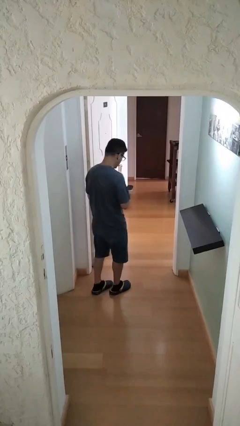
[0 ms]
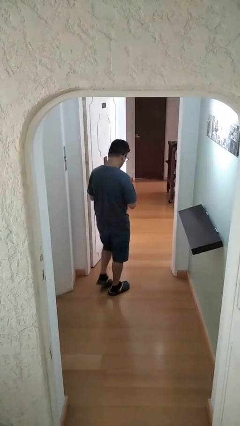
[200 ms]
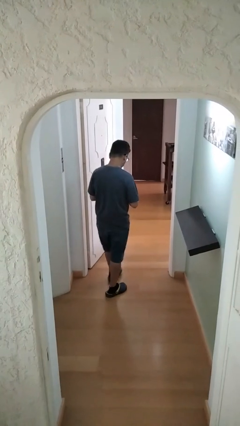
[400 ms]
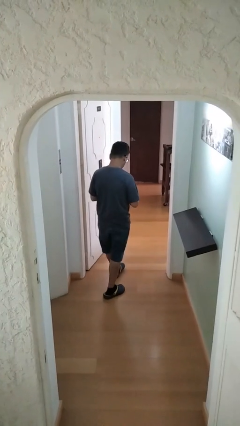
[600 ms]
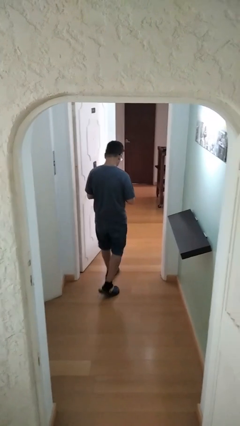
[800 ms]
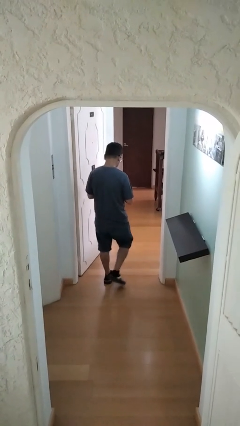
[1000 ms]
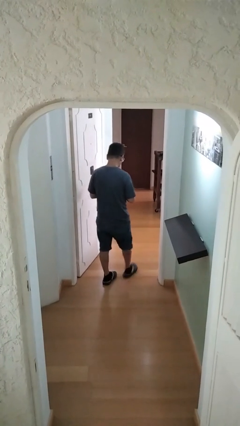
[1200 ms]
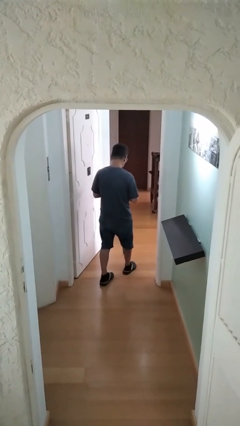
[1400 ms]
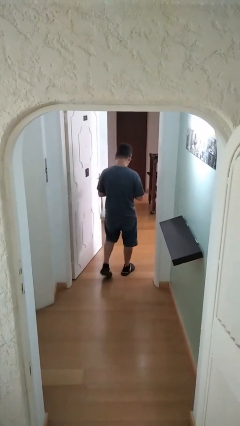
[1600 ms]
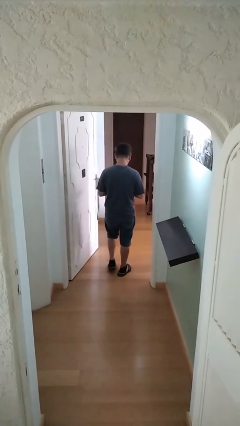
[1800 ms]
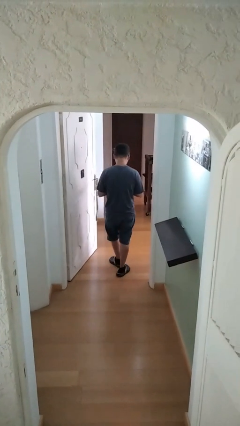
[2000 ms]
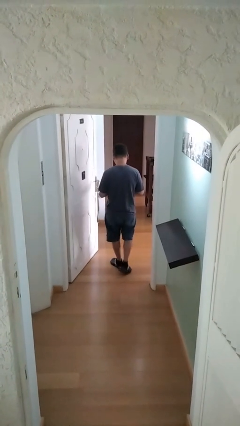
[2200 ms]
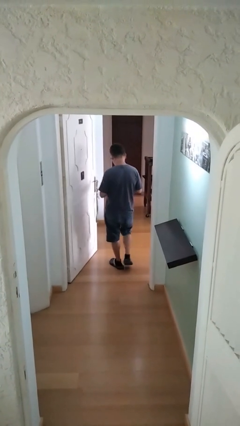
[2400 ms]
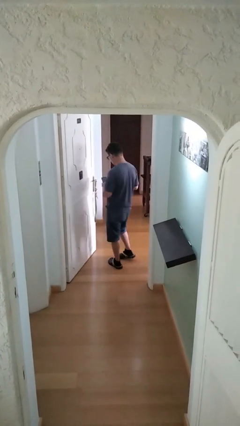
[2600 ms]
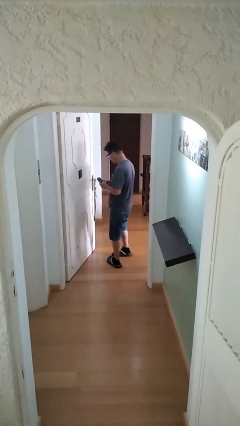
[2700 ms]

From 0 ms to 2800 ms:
person exits scene through structure

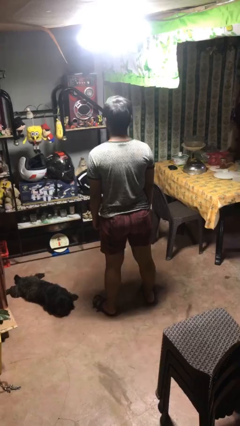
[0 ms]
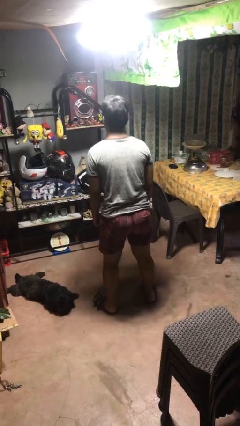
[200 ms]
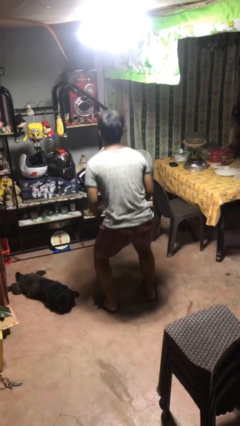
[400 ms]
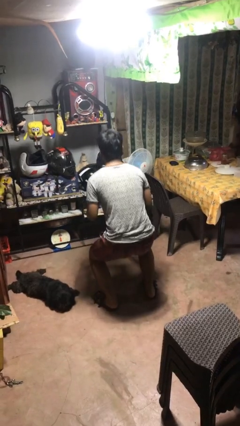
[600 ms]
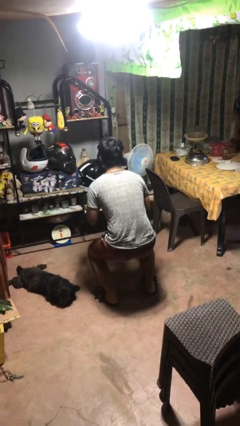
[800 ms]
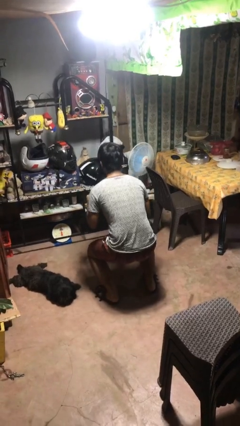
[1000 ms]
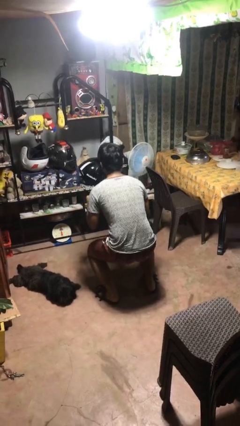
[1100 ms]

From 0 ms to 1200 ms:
person squats

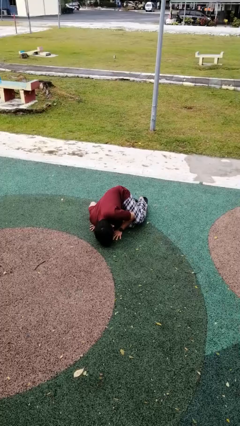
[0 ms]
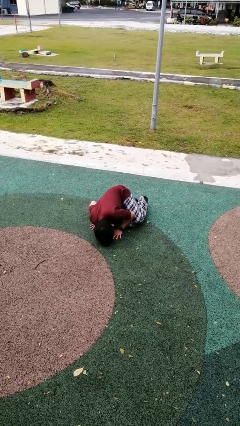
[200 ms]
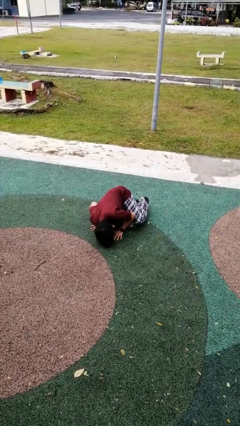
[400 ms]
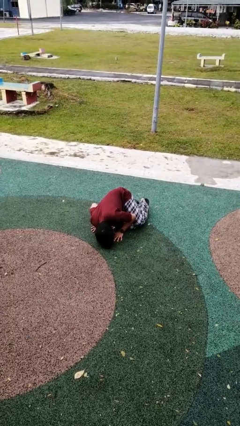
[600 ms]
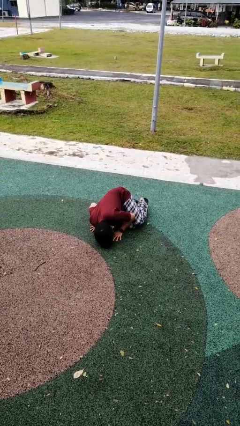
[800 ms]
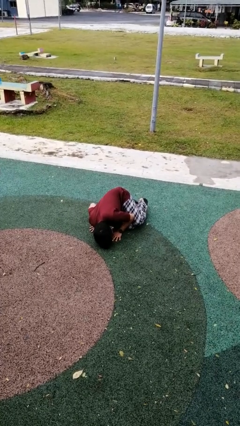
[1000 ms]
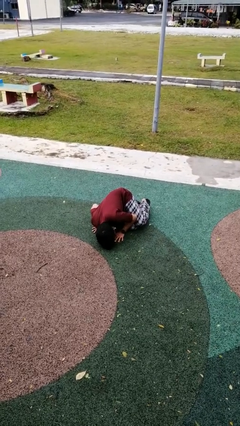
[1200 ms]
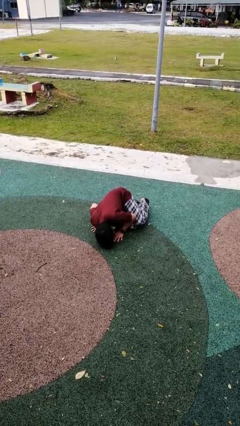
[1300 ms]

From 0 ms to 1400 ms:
person lies down on floor

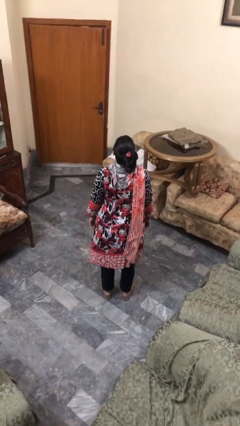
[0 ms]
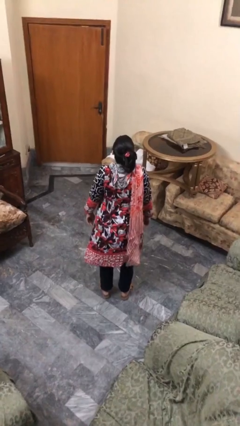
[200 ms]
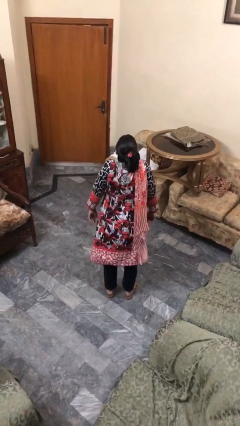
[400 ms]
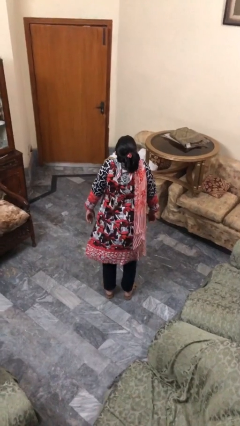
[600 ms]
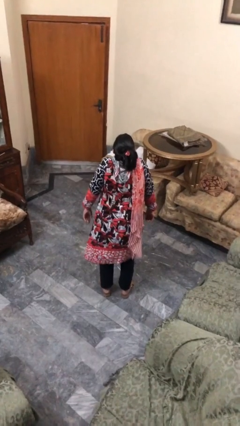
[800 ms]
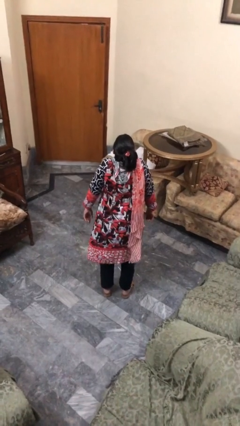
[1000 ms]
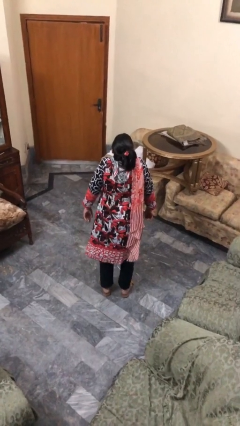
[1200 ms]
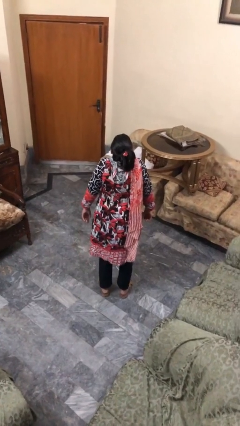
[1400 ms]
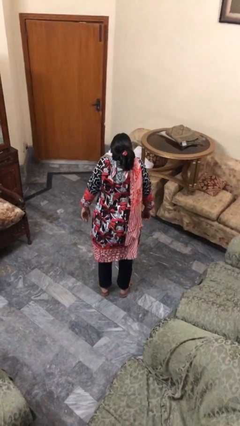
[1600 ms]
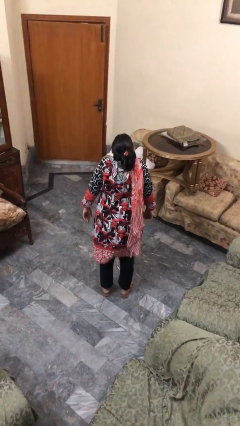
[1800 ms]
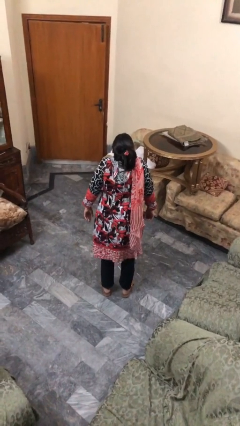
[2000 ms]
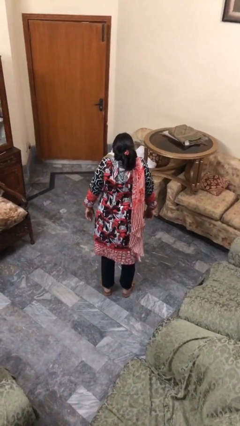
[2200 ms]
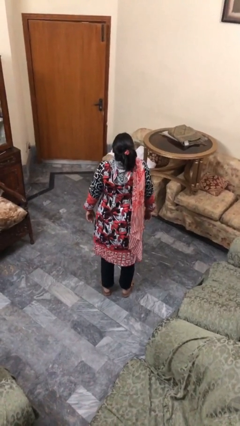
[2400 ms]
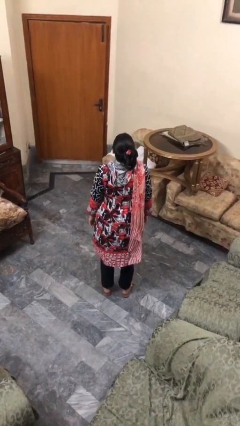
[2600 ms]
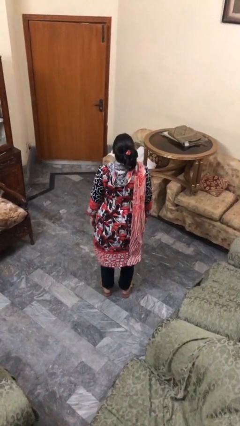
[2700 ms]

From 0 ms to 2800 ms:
person shrugs

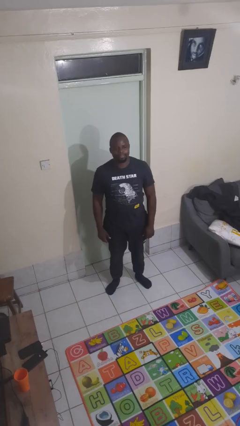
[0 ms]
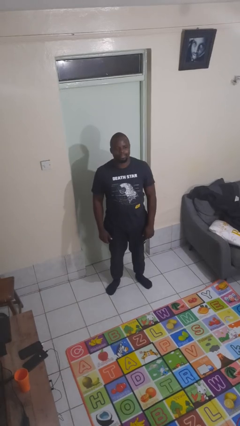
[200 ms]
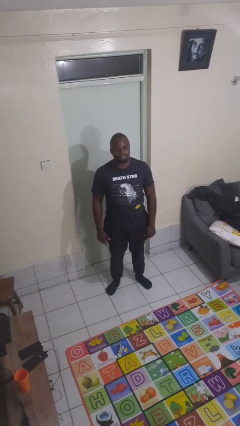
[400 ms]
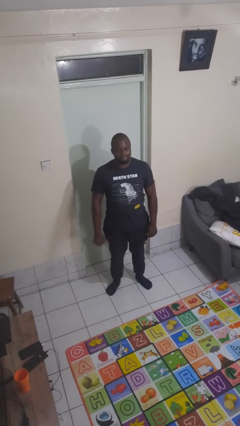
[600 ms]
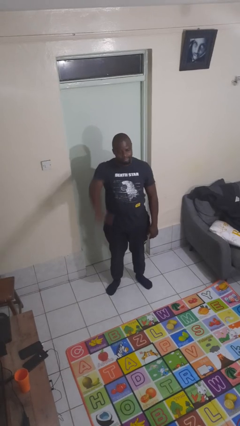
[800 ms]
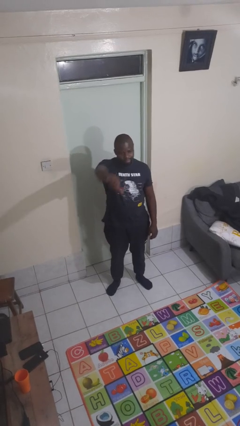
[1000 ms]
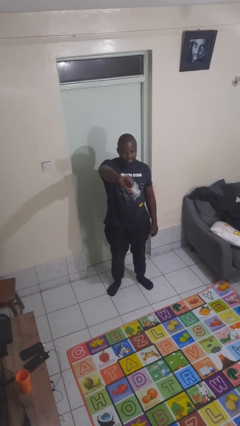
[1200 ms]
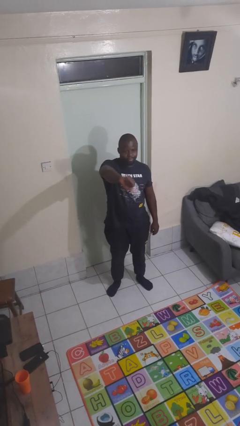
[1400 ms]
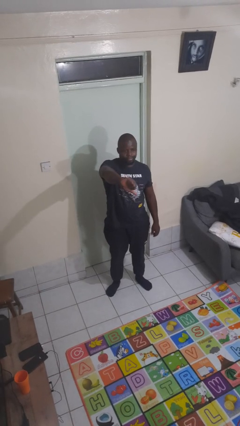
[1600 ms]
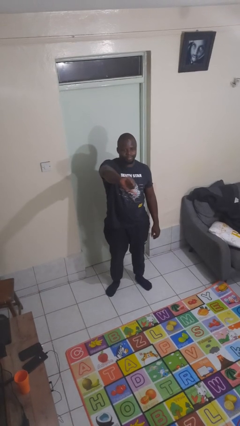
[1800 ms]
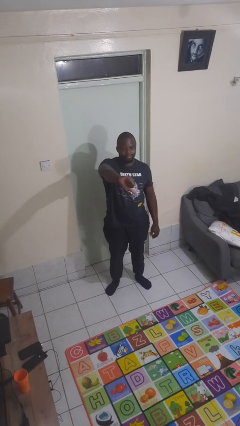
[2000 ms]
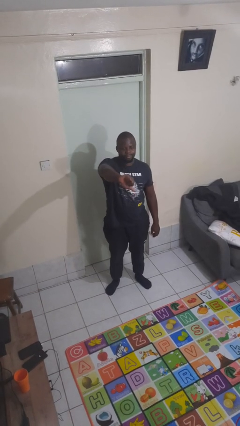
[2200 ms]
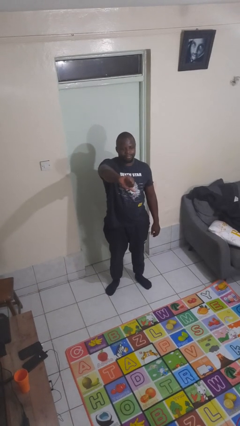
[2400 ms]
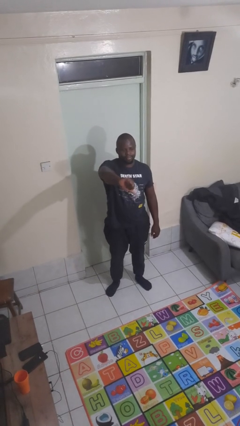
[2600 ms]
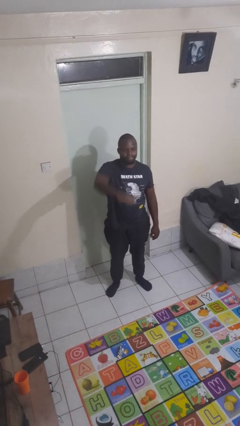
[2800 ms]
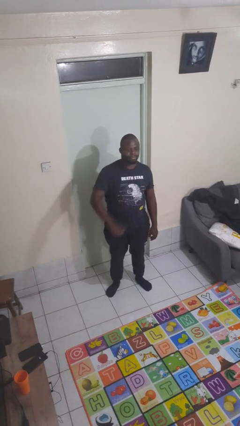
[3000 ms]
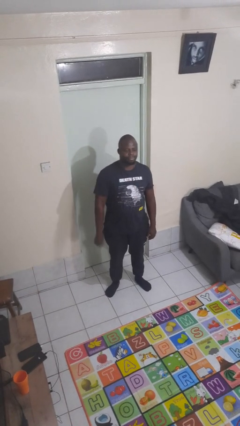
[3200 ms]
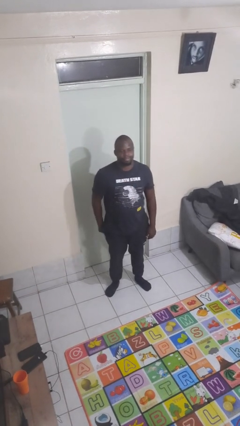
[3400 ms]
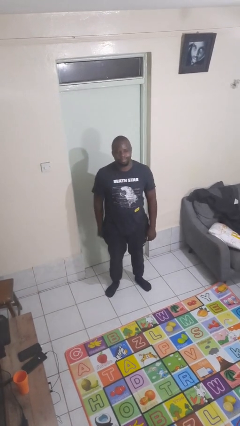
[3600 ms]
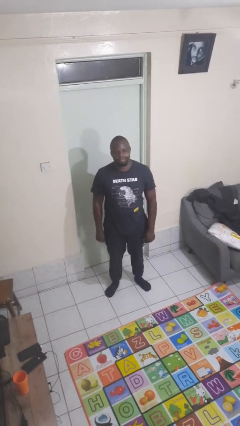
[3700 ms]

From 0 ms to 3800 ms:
person gestures thumbs down

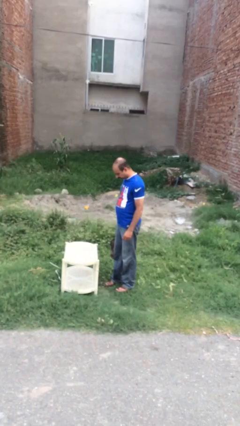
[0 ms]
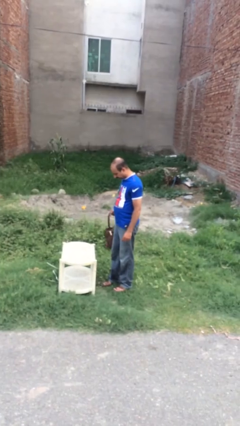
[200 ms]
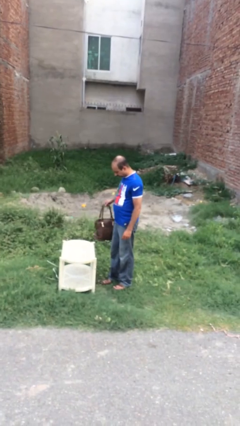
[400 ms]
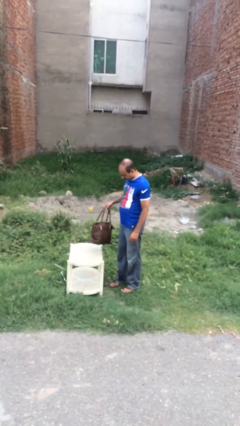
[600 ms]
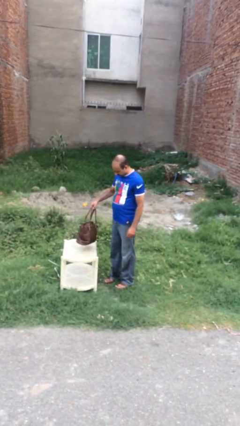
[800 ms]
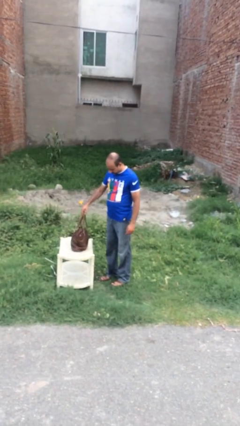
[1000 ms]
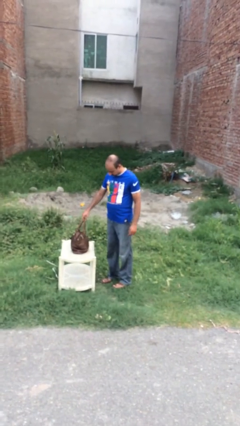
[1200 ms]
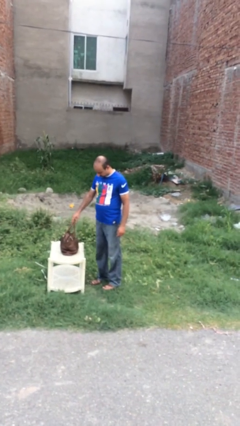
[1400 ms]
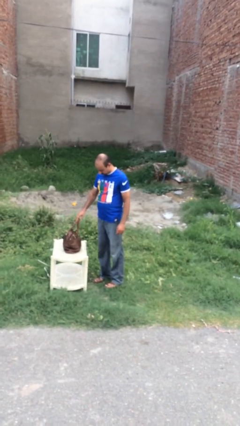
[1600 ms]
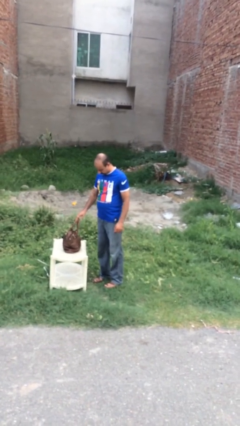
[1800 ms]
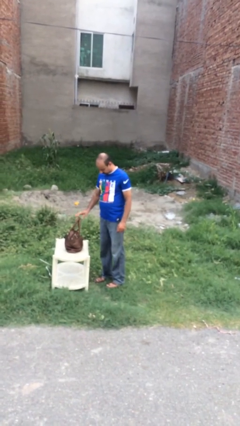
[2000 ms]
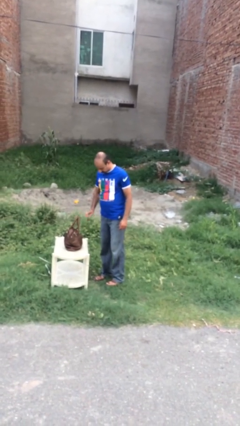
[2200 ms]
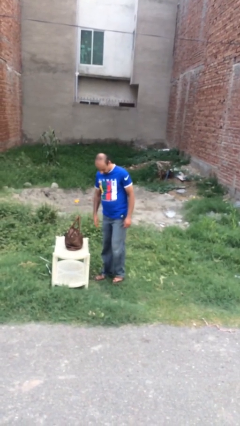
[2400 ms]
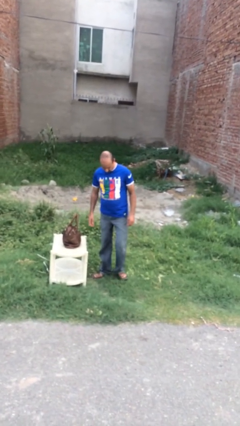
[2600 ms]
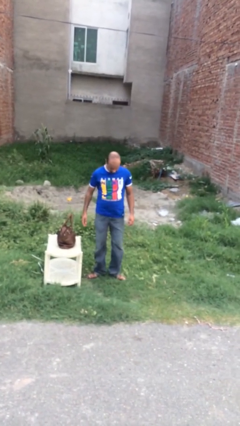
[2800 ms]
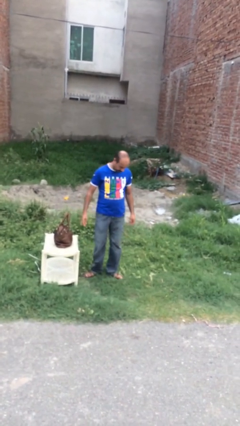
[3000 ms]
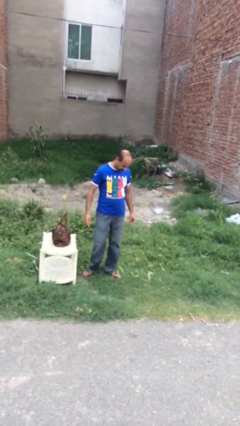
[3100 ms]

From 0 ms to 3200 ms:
person puts down object on table

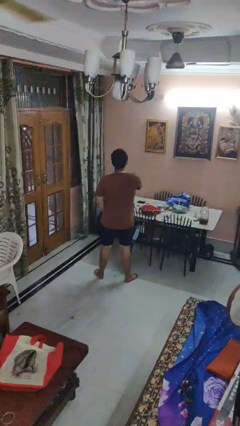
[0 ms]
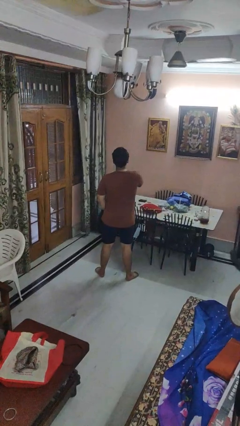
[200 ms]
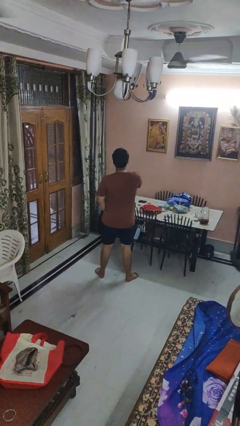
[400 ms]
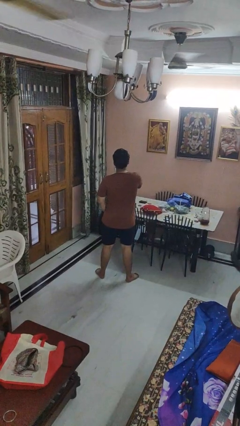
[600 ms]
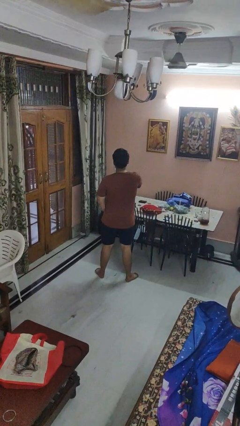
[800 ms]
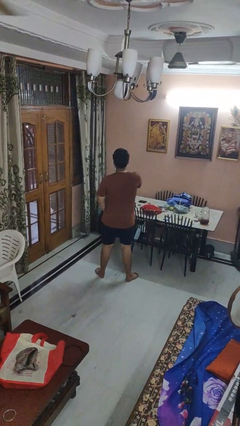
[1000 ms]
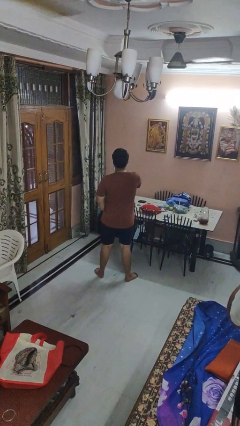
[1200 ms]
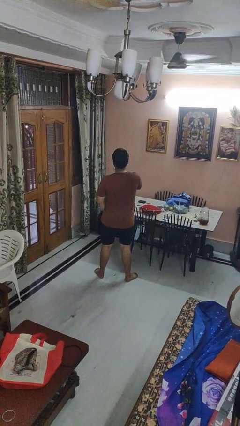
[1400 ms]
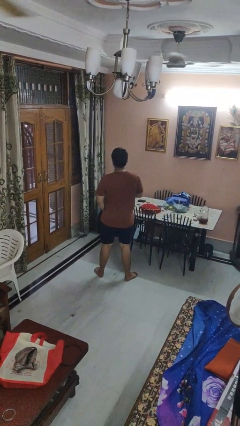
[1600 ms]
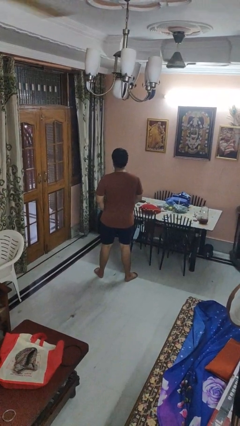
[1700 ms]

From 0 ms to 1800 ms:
person gestures be quiet

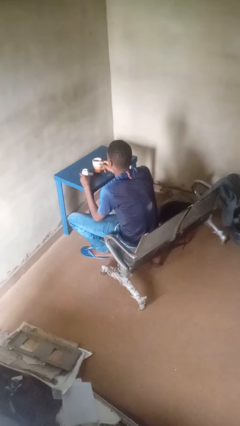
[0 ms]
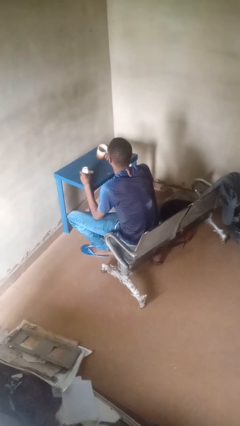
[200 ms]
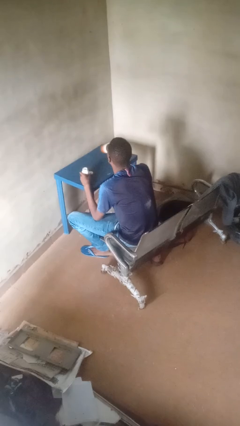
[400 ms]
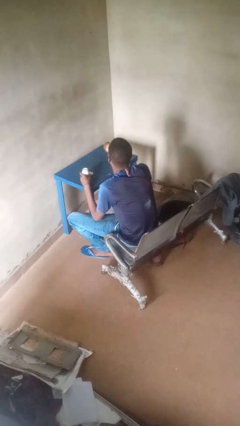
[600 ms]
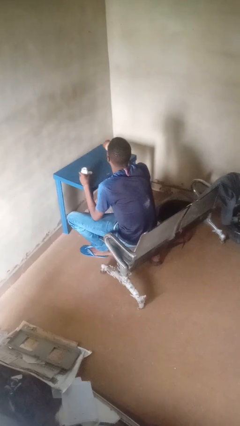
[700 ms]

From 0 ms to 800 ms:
person drinks from cup
